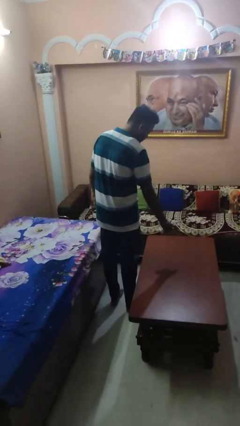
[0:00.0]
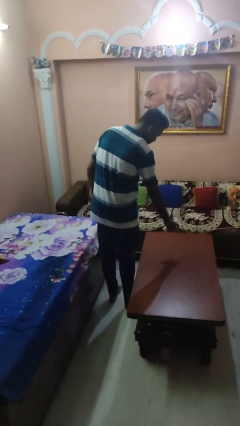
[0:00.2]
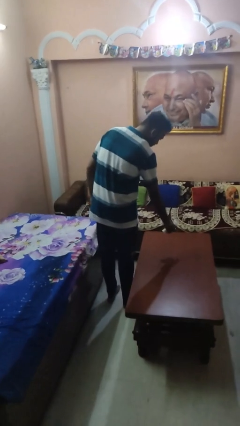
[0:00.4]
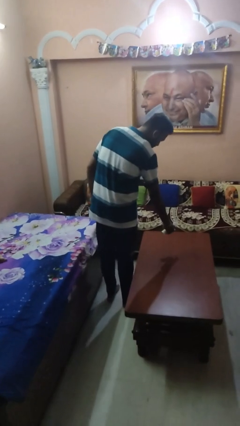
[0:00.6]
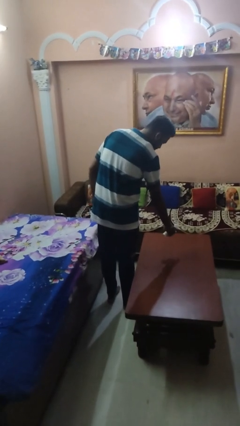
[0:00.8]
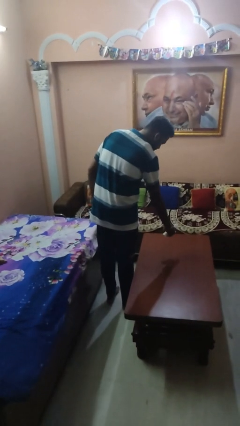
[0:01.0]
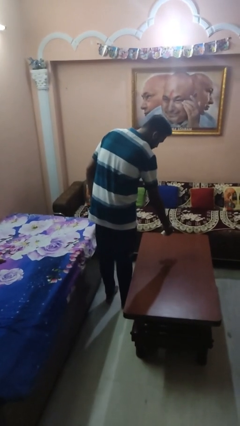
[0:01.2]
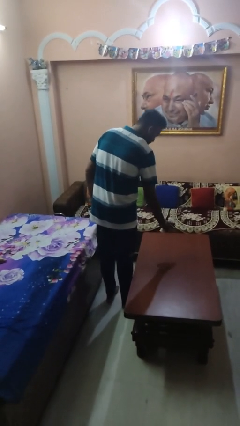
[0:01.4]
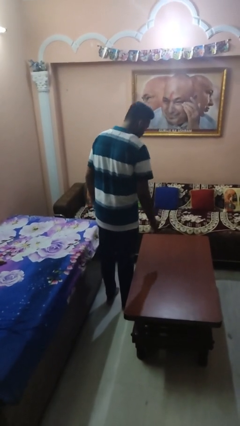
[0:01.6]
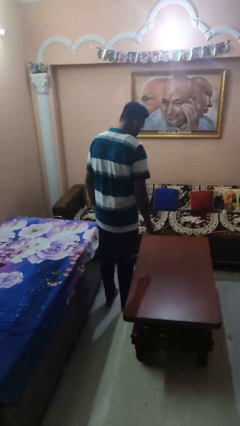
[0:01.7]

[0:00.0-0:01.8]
person sprays from bottle

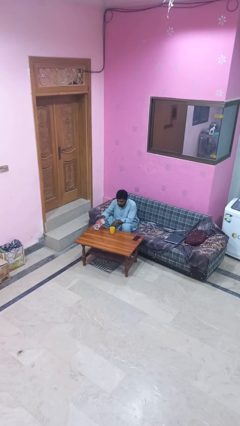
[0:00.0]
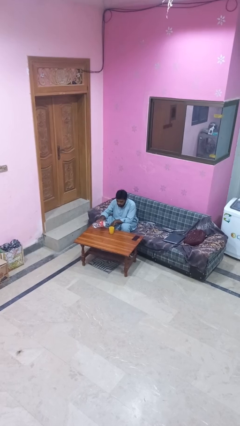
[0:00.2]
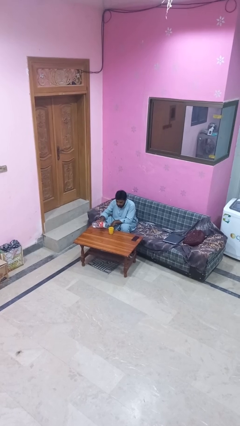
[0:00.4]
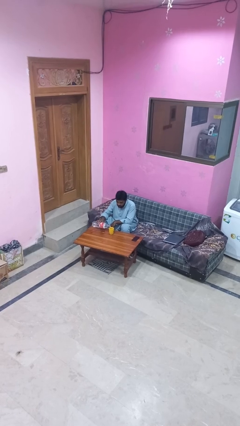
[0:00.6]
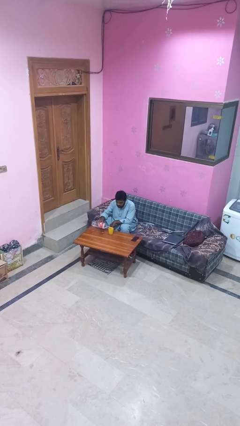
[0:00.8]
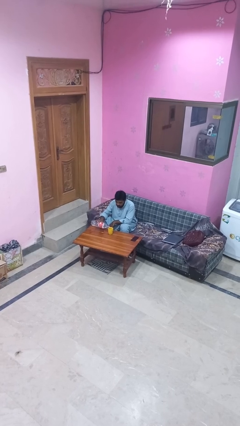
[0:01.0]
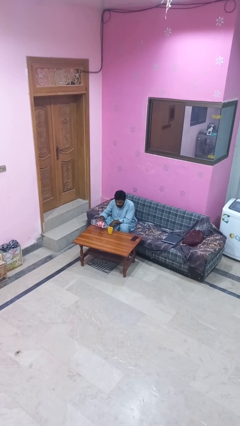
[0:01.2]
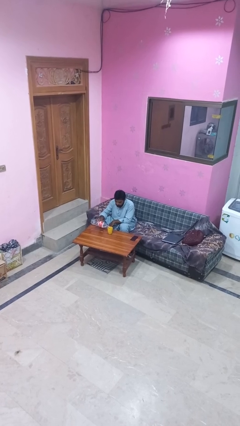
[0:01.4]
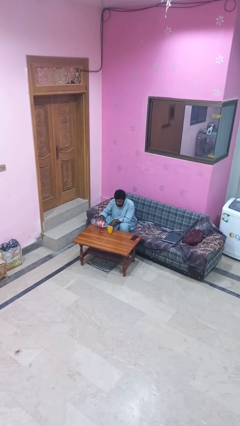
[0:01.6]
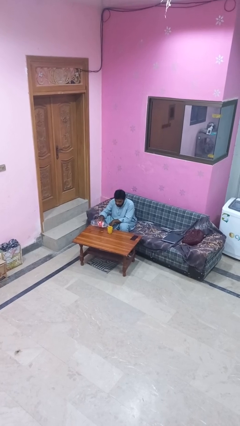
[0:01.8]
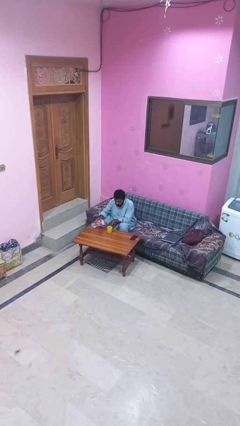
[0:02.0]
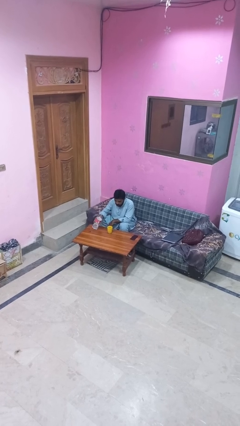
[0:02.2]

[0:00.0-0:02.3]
person pours liquid into cup

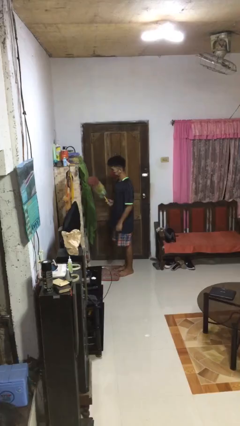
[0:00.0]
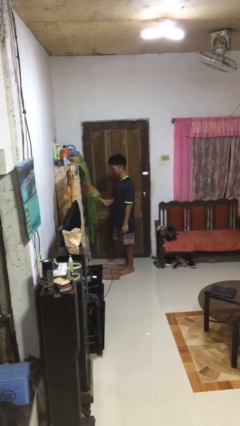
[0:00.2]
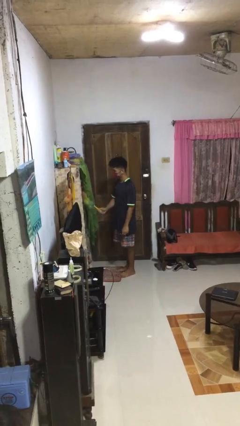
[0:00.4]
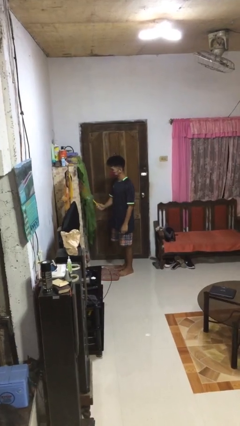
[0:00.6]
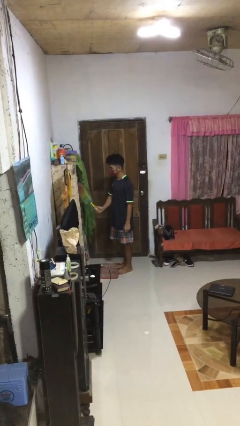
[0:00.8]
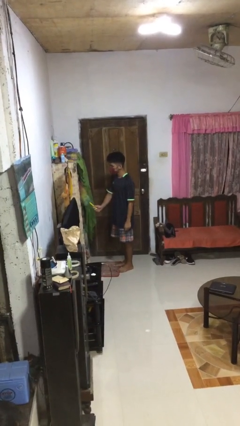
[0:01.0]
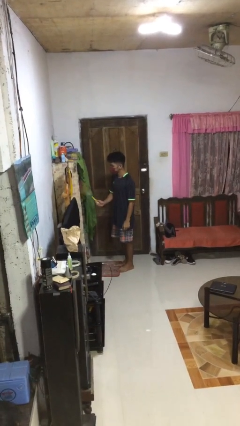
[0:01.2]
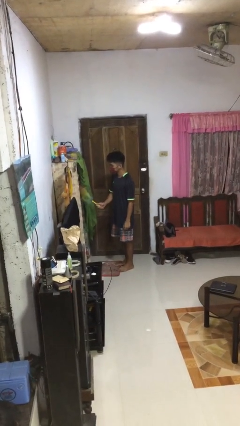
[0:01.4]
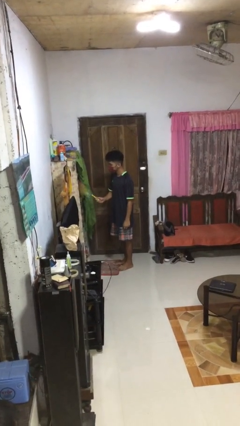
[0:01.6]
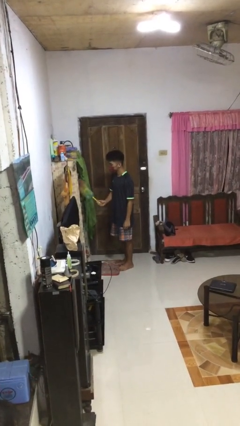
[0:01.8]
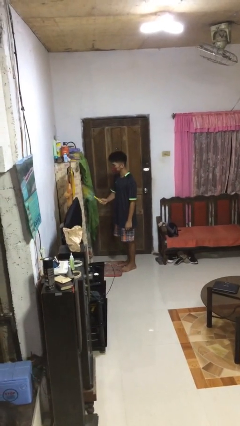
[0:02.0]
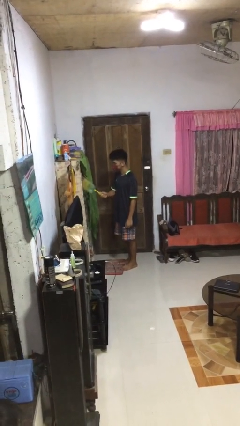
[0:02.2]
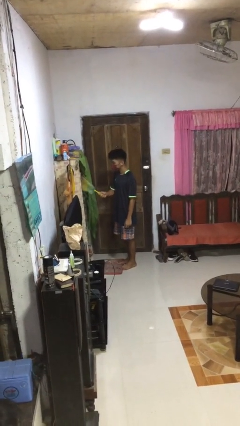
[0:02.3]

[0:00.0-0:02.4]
person dusts furniture

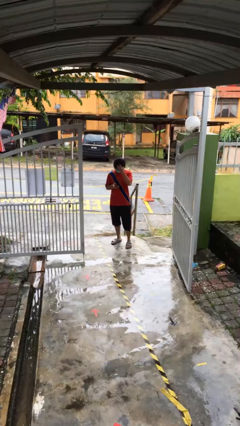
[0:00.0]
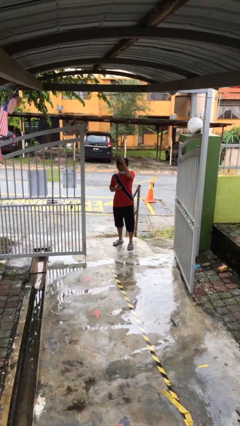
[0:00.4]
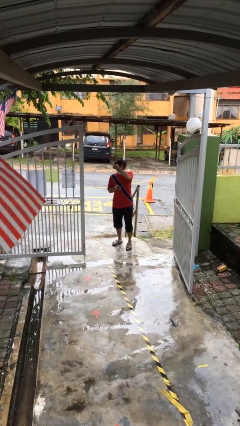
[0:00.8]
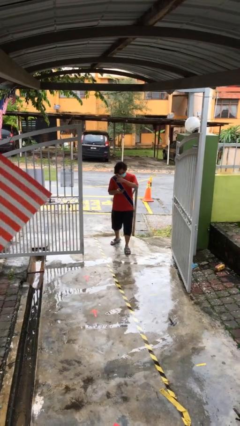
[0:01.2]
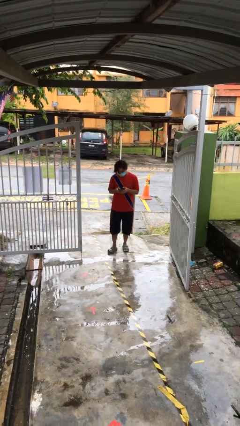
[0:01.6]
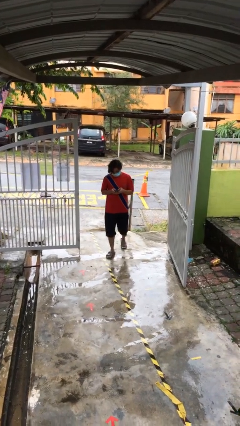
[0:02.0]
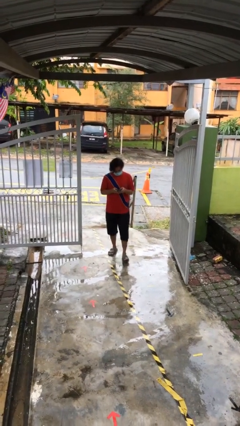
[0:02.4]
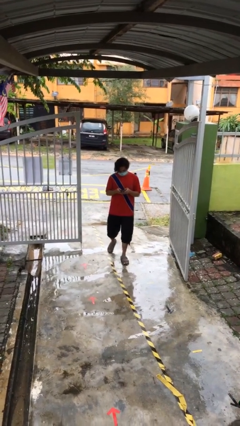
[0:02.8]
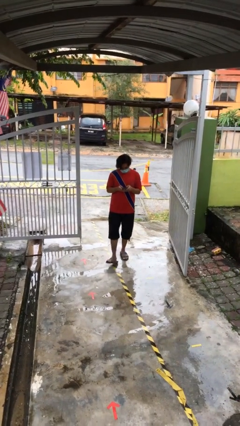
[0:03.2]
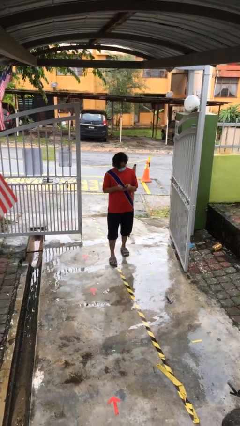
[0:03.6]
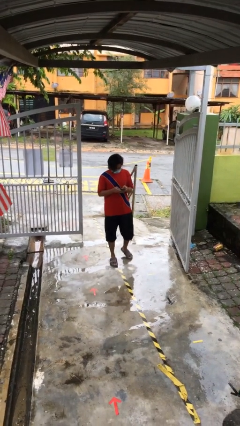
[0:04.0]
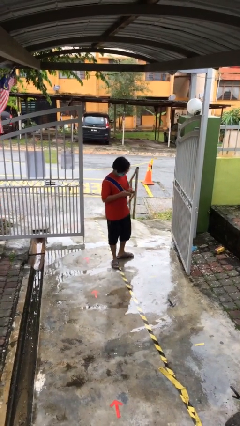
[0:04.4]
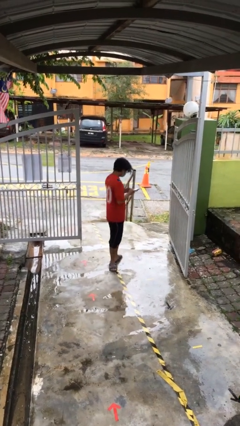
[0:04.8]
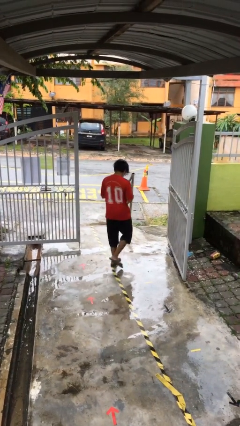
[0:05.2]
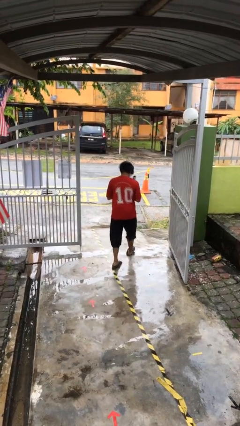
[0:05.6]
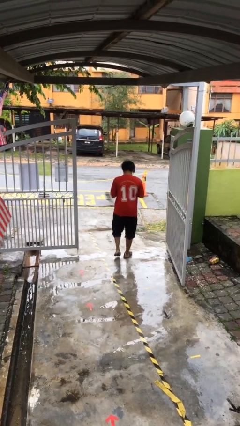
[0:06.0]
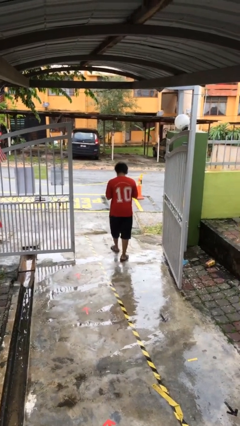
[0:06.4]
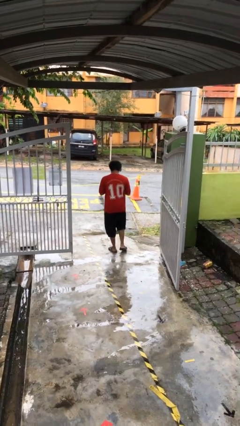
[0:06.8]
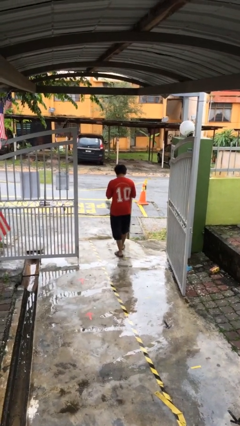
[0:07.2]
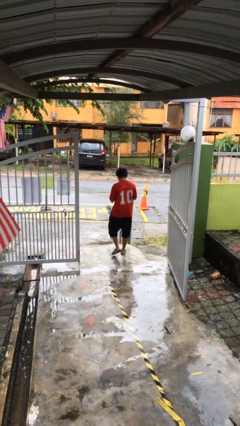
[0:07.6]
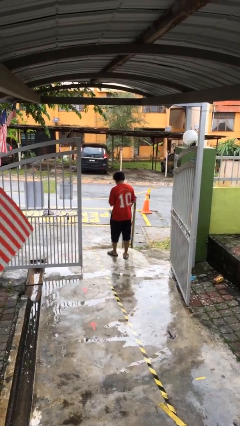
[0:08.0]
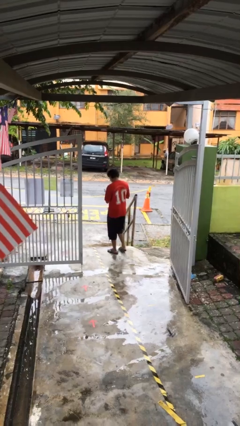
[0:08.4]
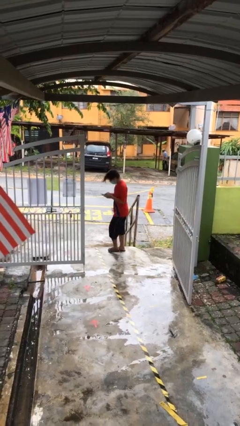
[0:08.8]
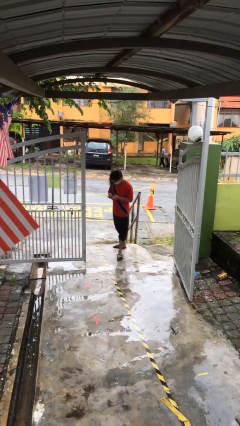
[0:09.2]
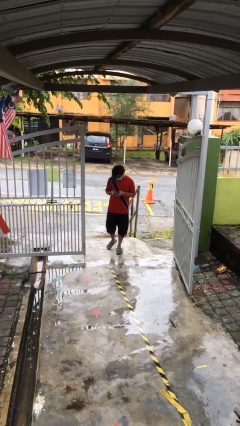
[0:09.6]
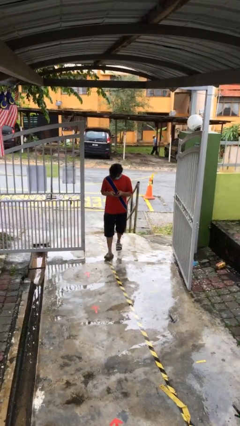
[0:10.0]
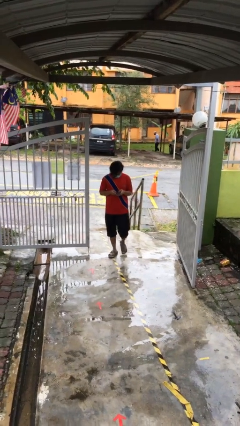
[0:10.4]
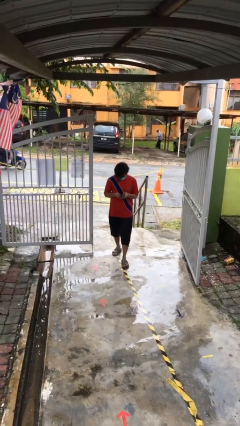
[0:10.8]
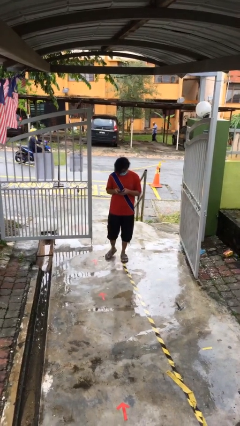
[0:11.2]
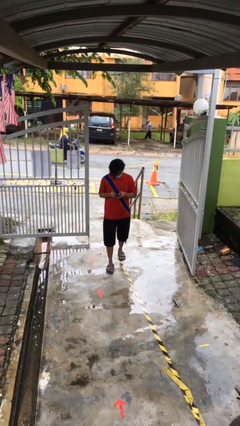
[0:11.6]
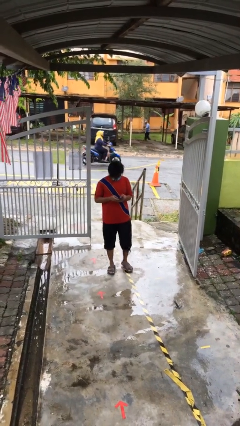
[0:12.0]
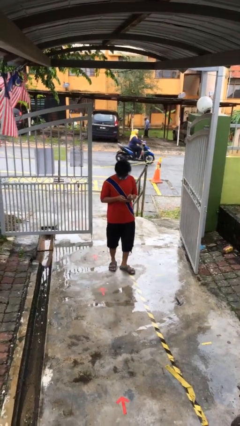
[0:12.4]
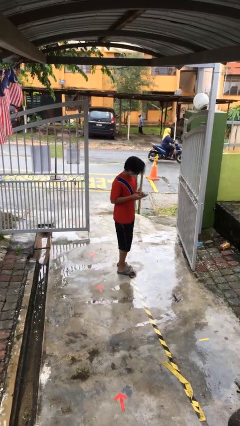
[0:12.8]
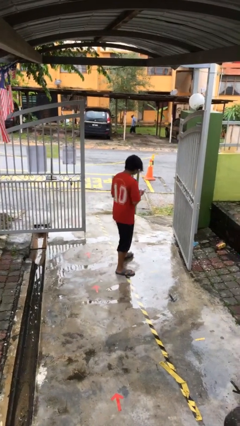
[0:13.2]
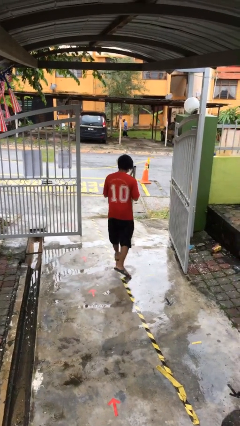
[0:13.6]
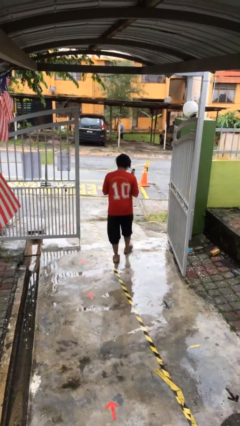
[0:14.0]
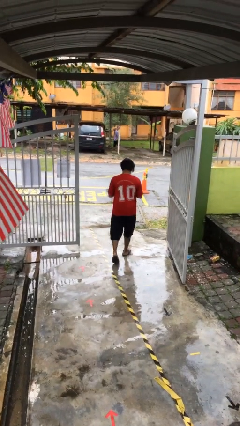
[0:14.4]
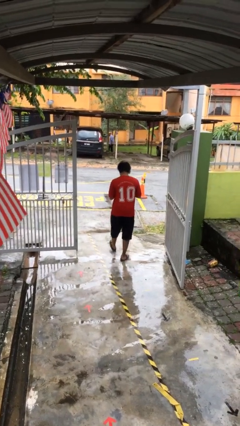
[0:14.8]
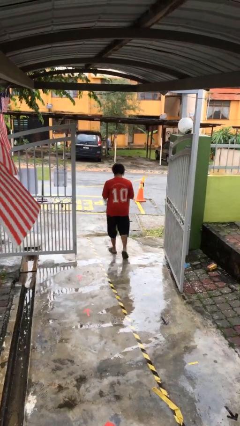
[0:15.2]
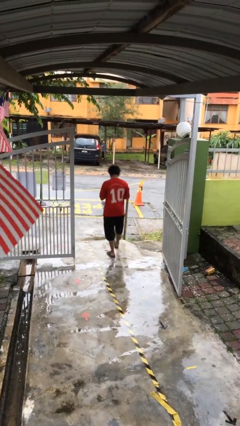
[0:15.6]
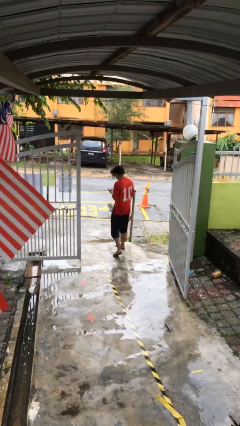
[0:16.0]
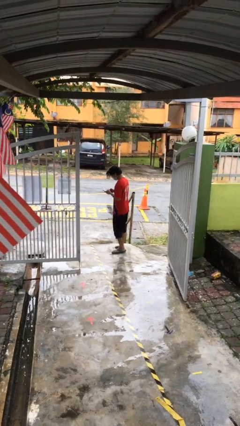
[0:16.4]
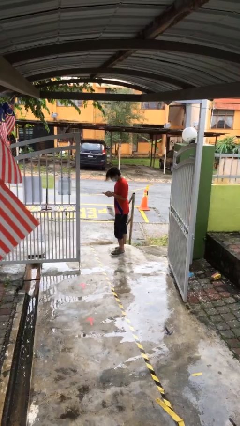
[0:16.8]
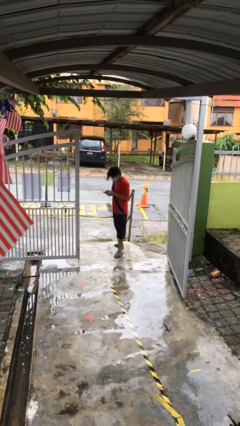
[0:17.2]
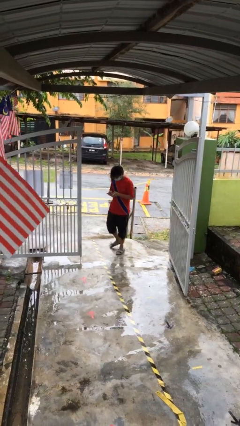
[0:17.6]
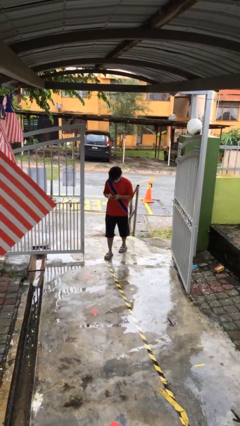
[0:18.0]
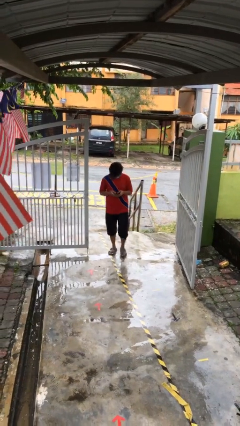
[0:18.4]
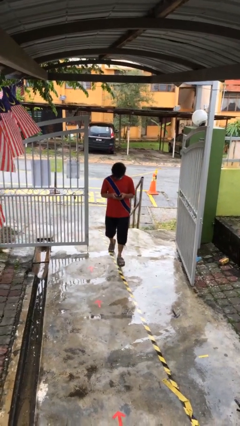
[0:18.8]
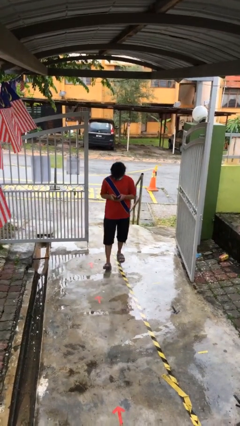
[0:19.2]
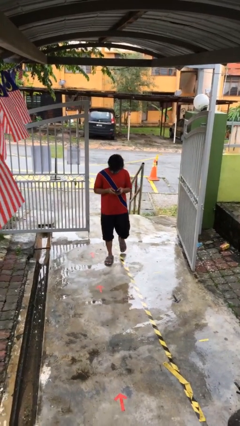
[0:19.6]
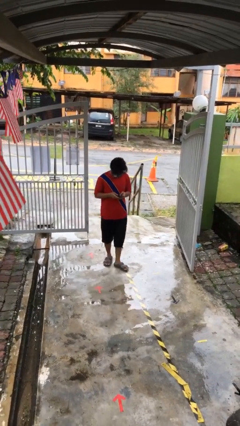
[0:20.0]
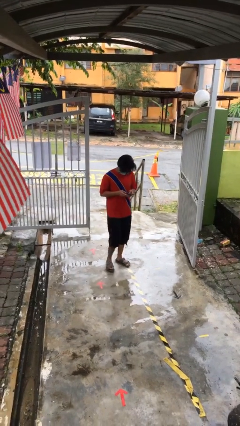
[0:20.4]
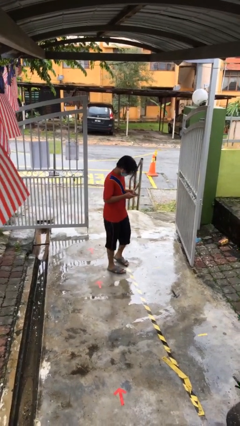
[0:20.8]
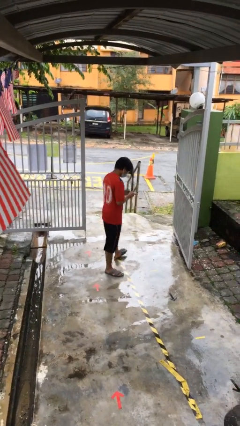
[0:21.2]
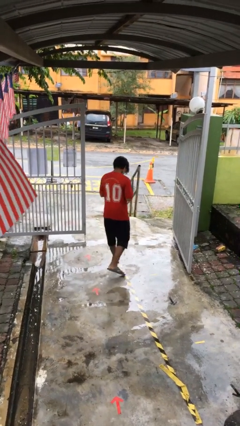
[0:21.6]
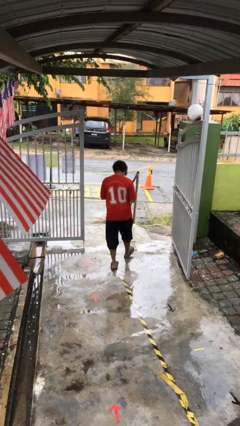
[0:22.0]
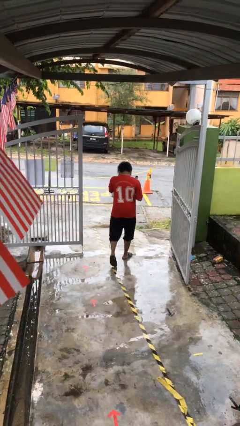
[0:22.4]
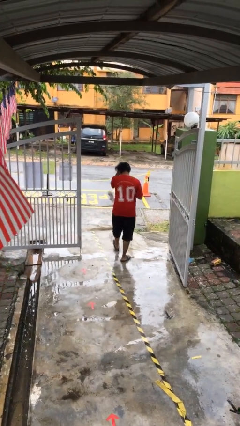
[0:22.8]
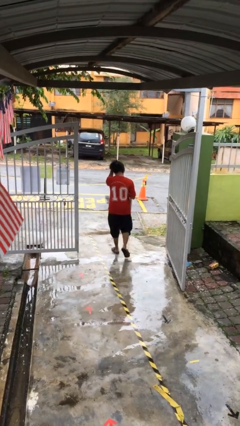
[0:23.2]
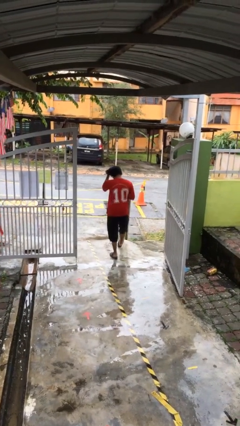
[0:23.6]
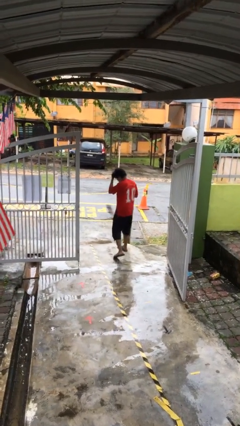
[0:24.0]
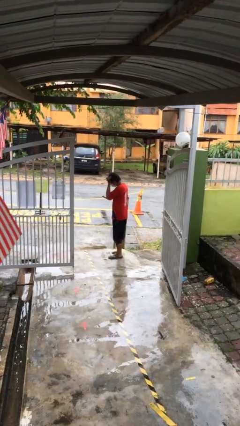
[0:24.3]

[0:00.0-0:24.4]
person texts on phone
